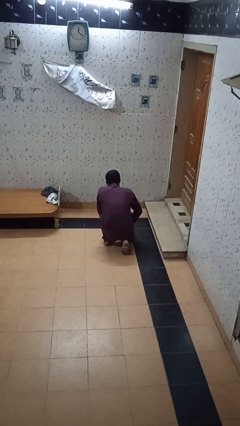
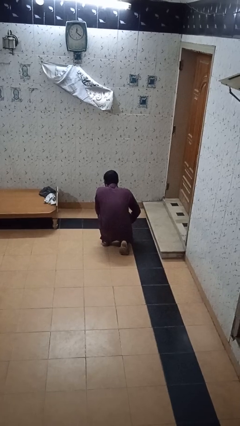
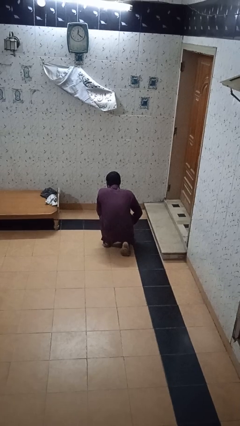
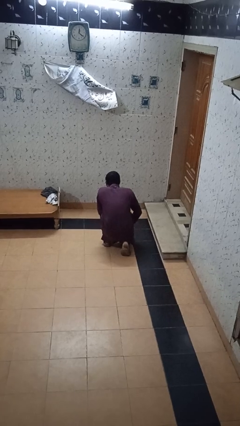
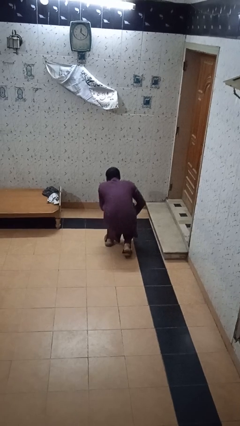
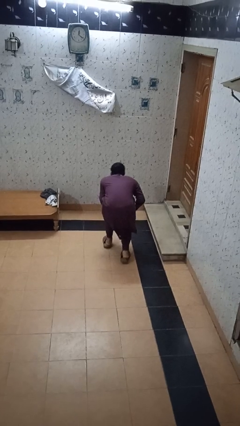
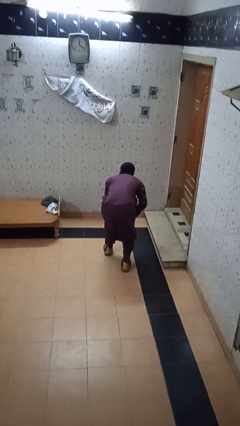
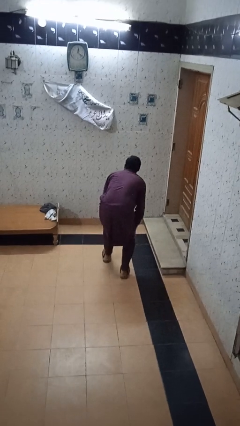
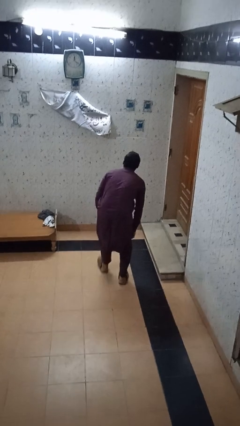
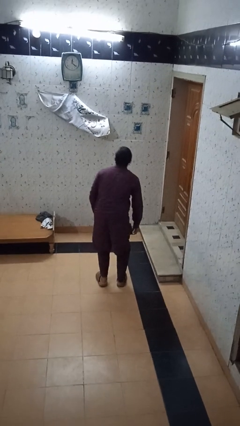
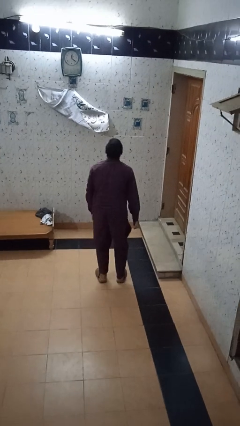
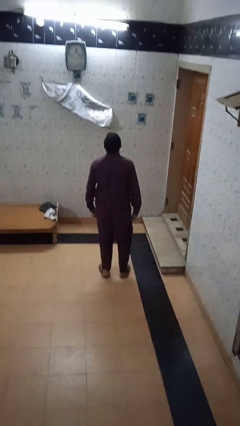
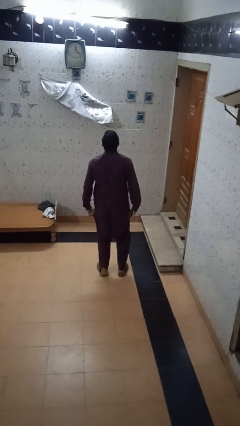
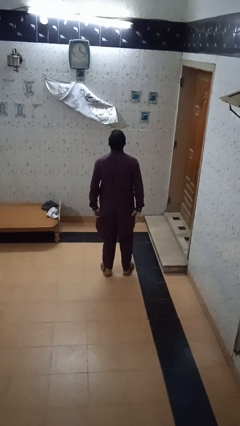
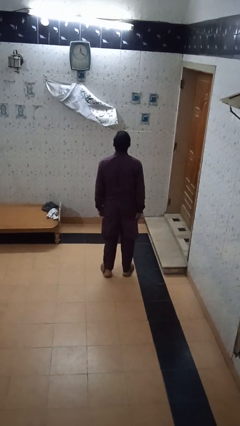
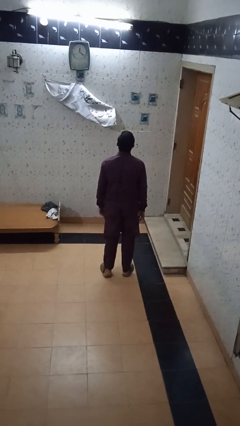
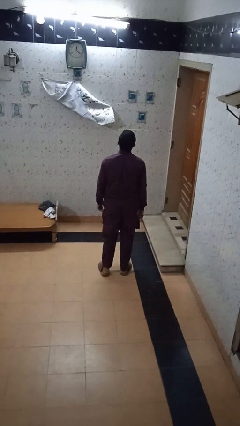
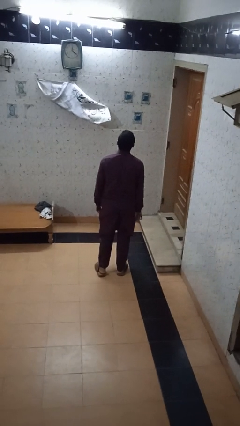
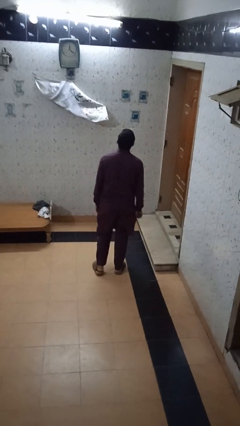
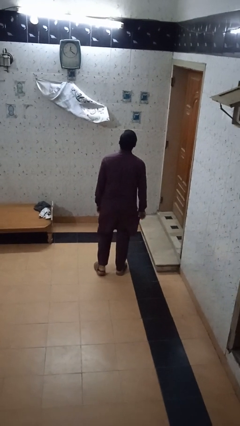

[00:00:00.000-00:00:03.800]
person stands up from floor

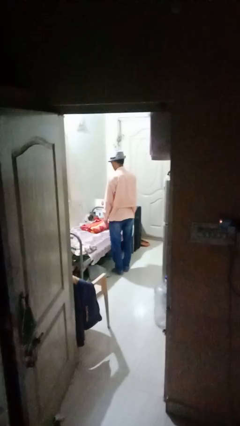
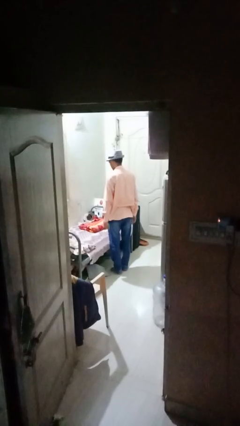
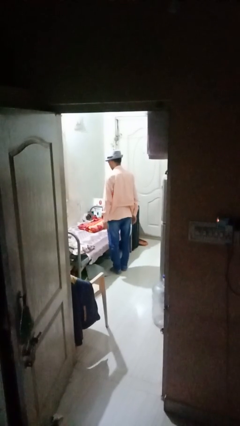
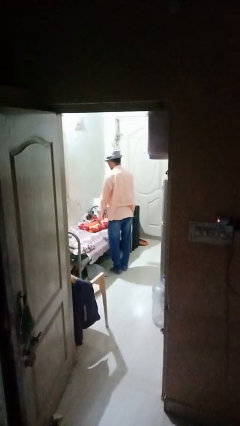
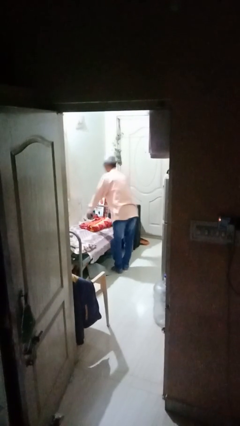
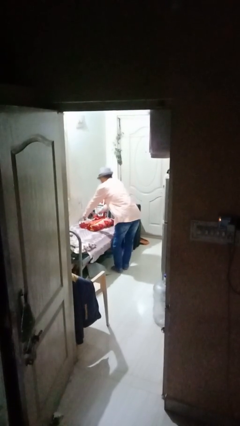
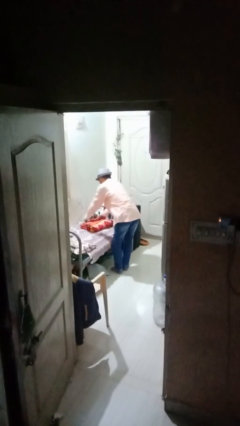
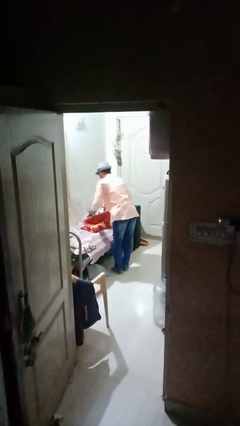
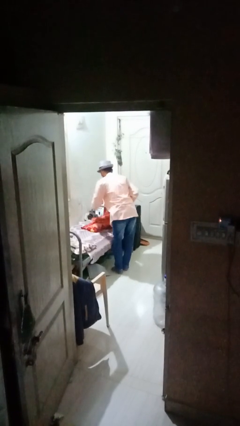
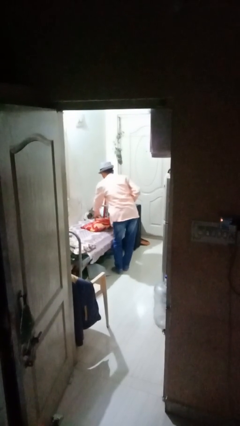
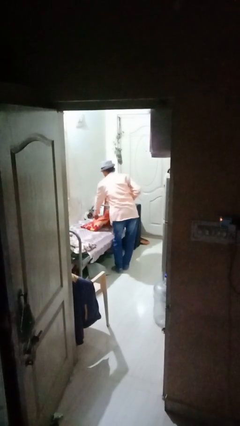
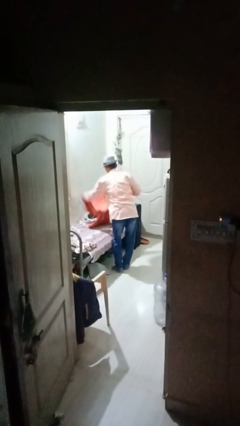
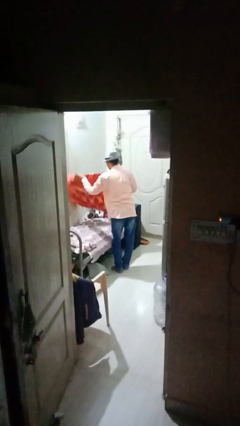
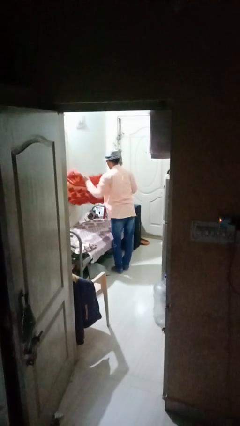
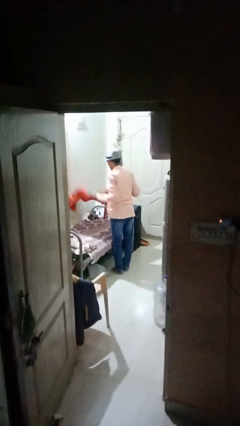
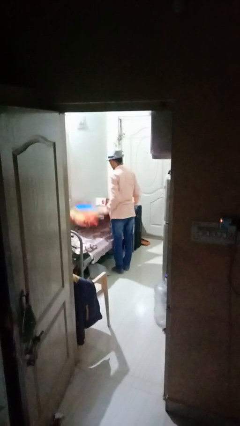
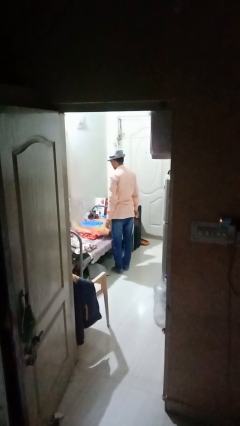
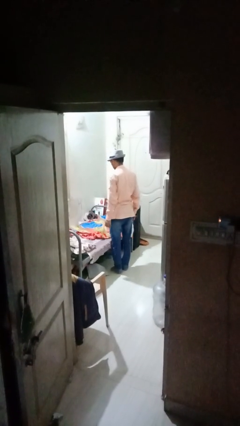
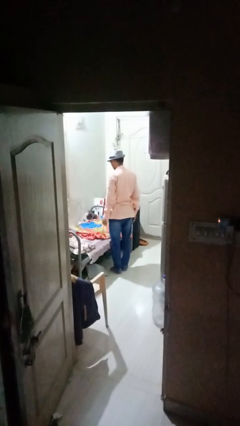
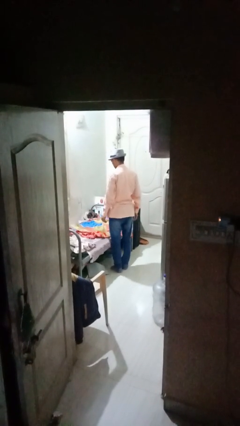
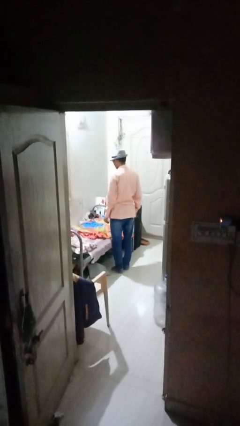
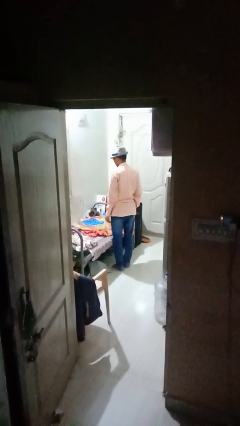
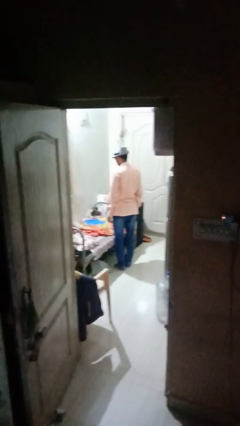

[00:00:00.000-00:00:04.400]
person unfolds blanket

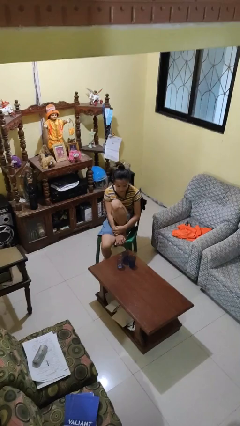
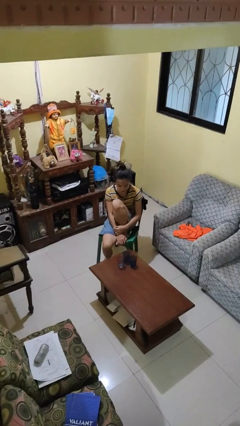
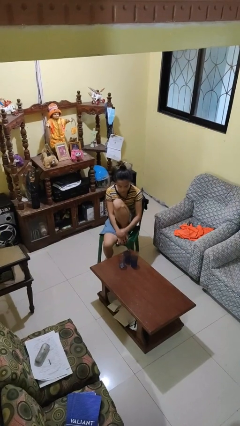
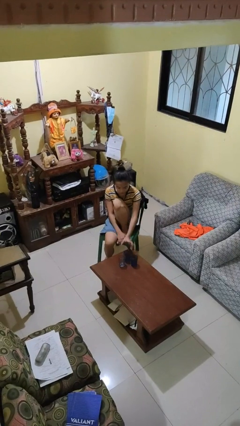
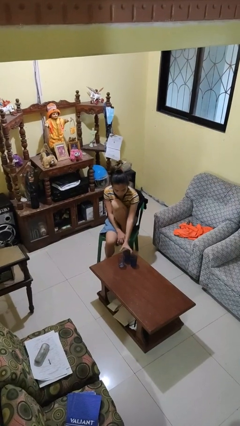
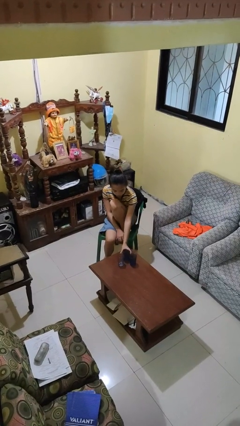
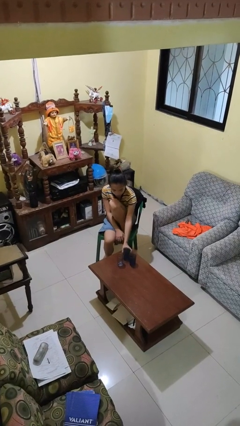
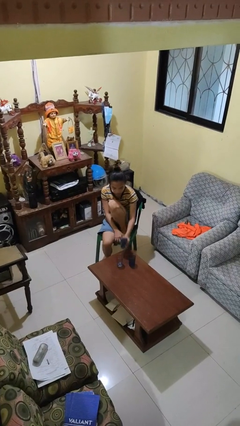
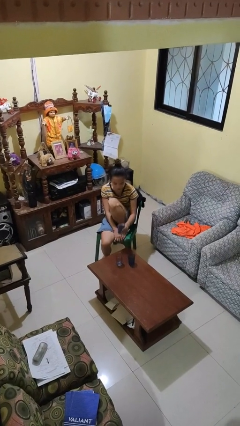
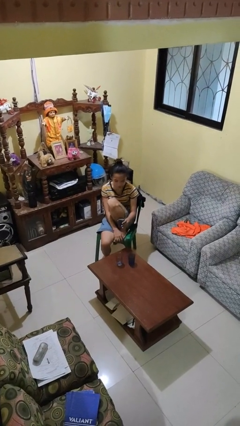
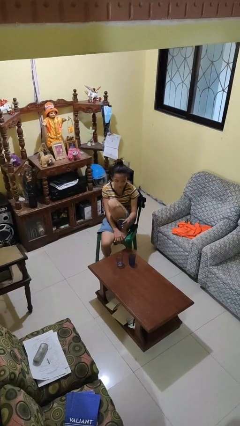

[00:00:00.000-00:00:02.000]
person picks up object from table

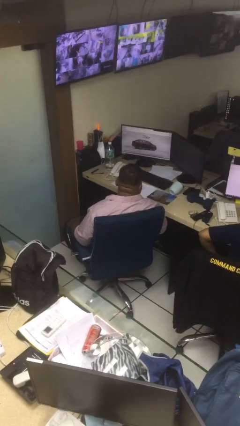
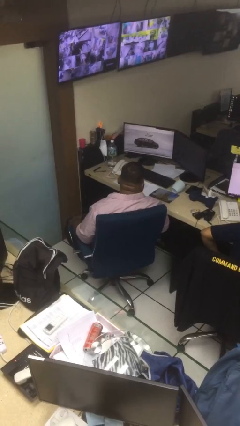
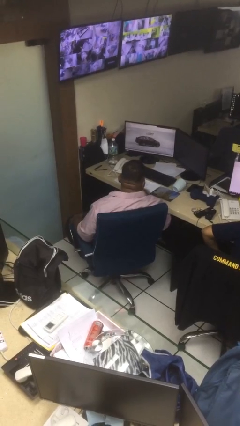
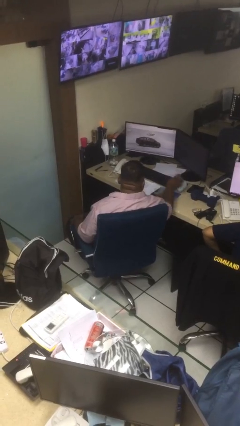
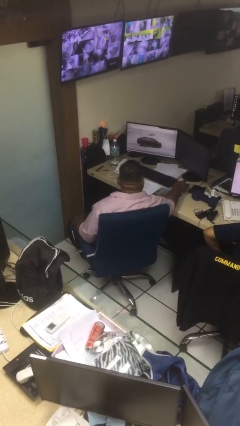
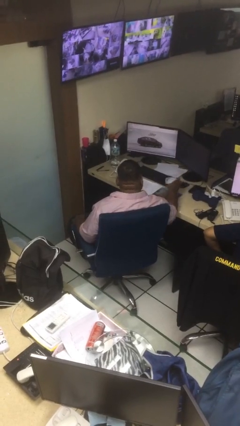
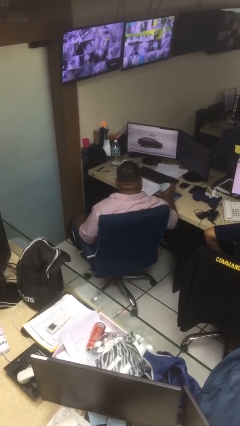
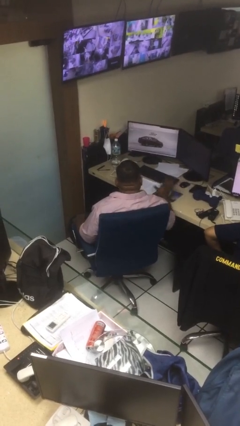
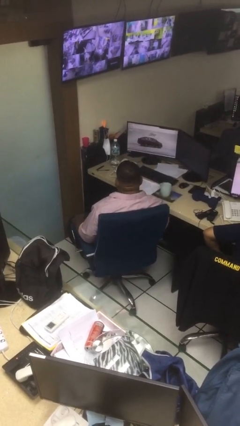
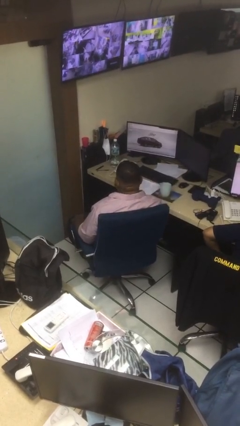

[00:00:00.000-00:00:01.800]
person sets upright glass

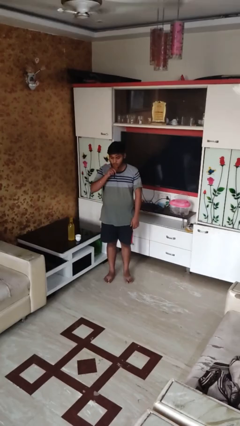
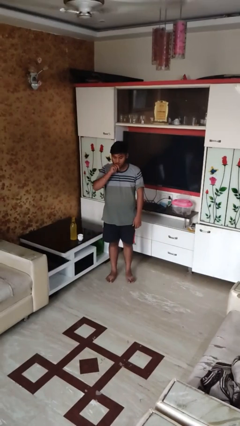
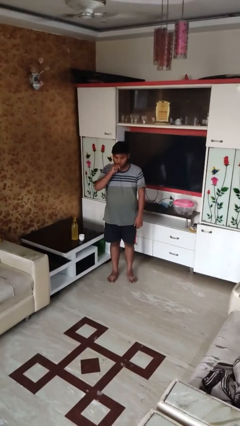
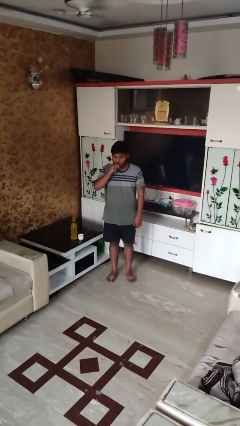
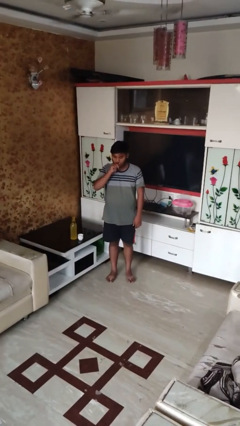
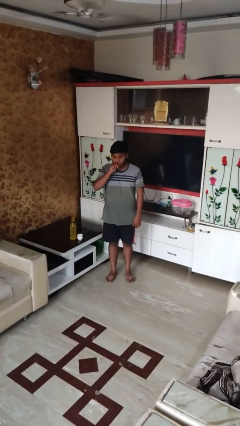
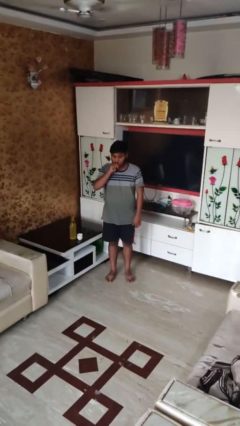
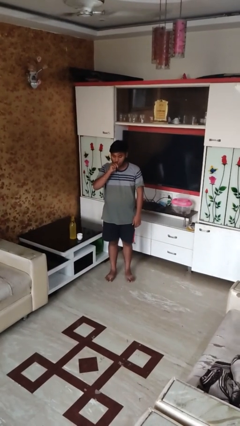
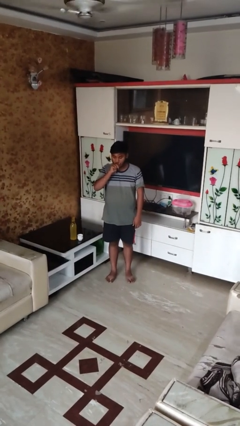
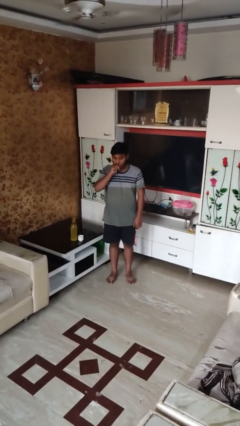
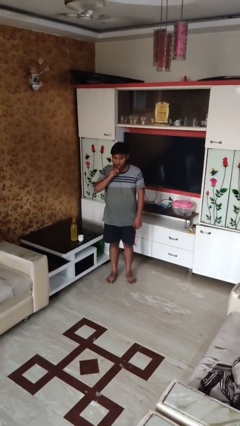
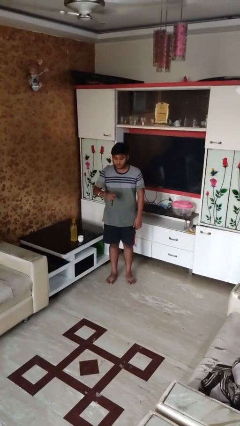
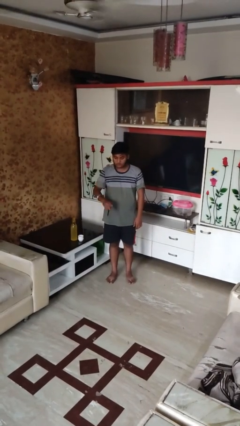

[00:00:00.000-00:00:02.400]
person vapes

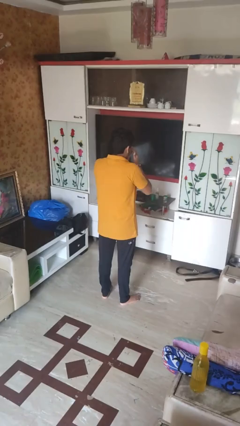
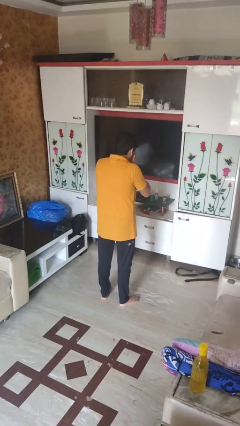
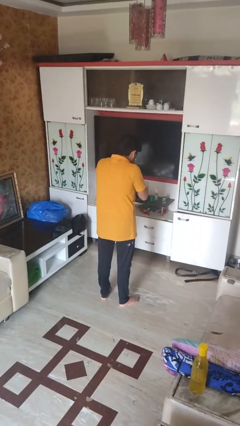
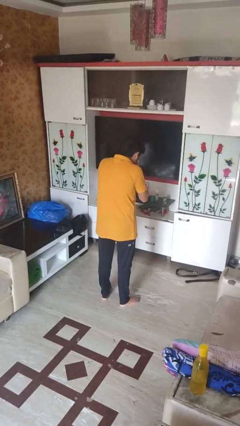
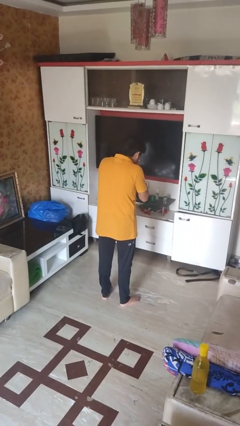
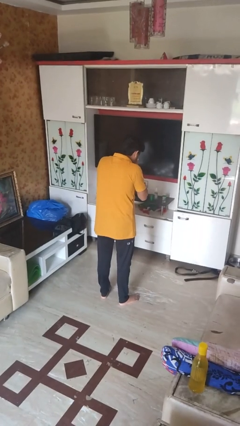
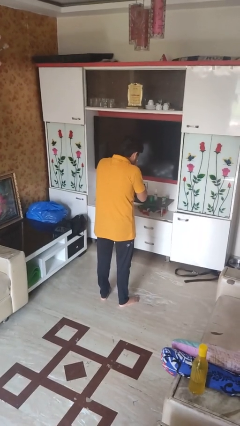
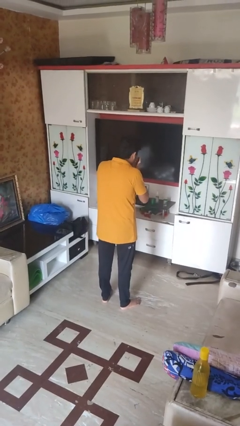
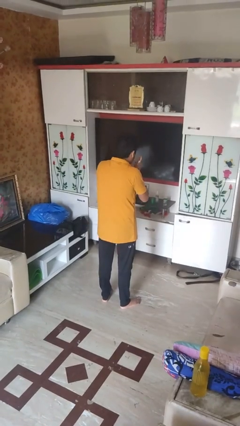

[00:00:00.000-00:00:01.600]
person sneezes into hand

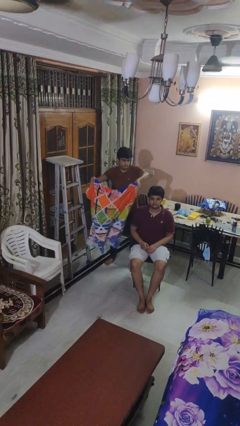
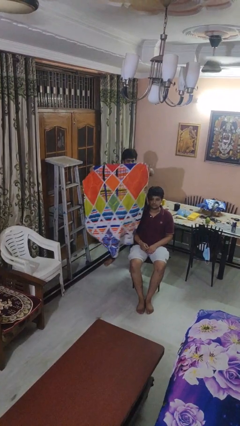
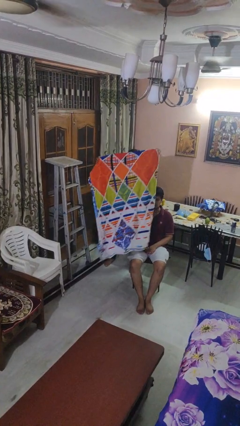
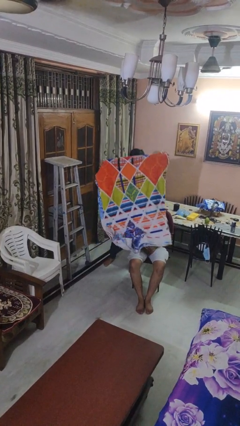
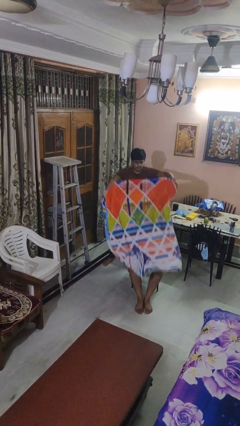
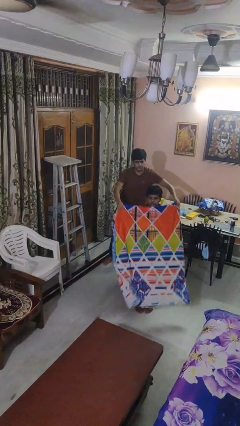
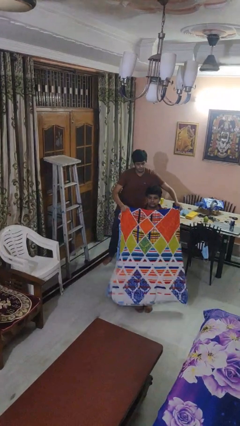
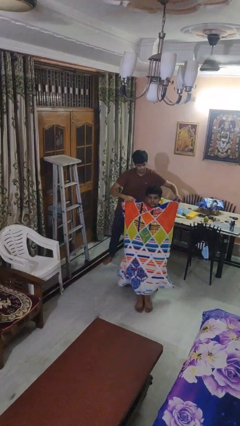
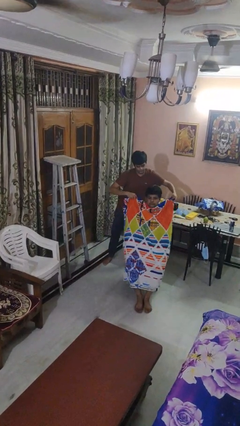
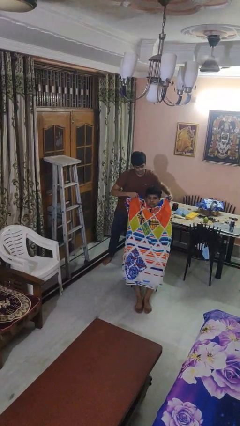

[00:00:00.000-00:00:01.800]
person covers friend with blanket
